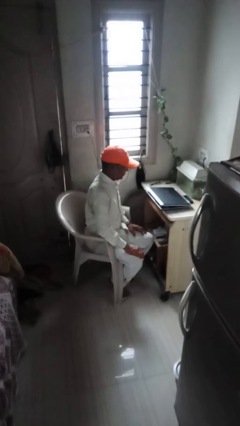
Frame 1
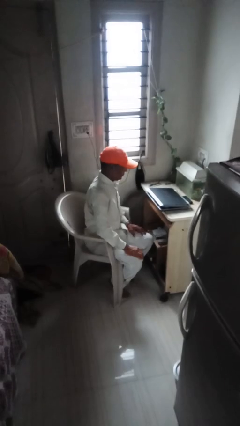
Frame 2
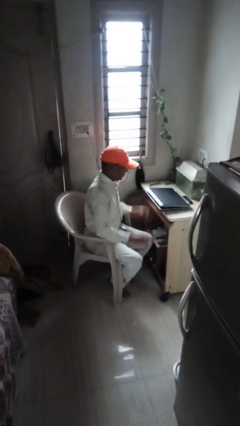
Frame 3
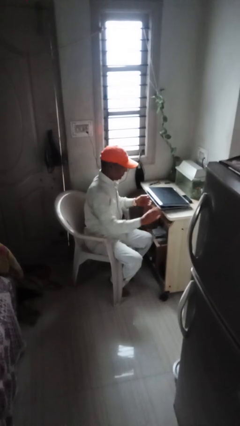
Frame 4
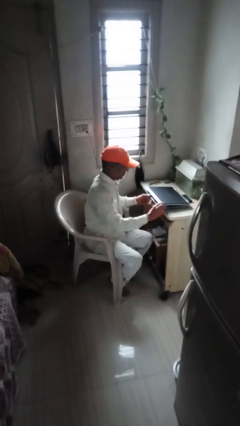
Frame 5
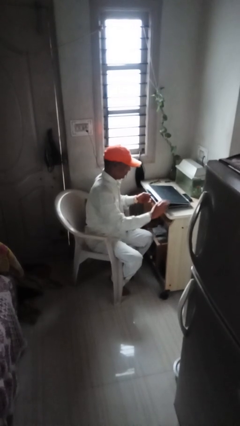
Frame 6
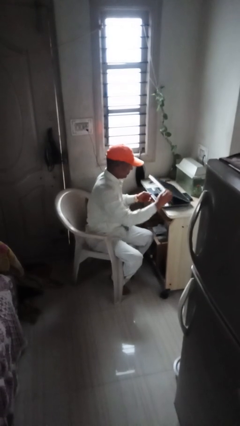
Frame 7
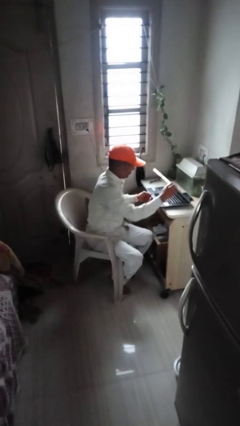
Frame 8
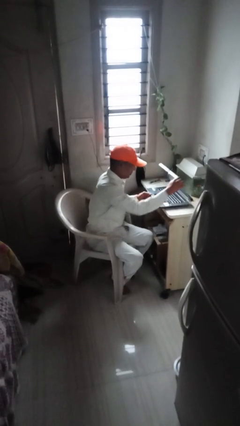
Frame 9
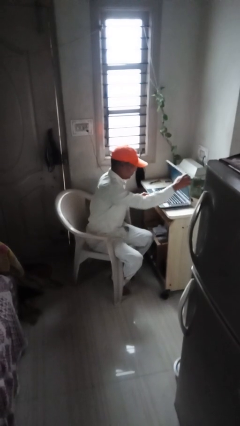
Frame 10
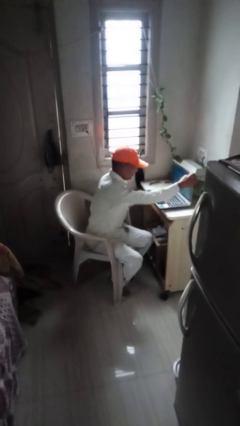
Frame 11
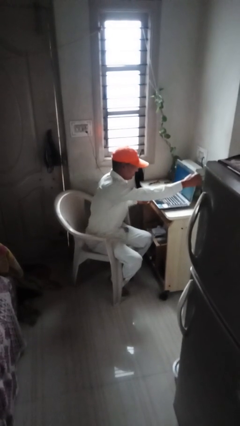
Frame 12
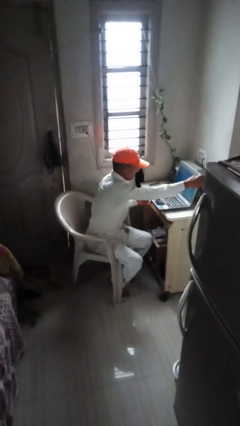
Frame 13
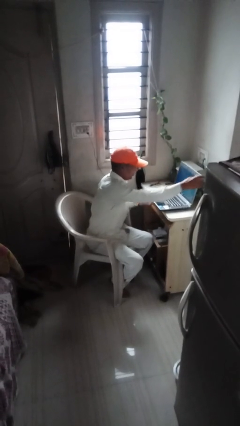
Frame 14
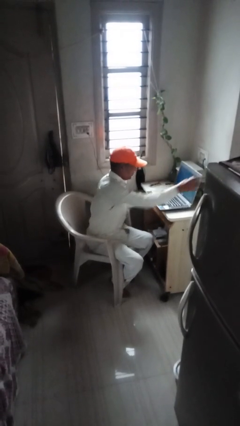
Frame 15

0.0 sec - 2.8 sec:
person opens laptop

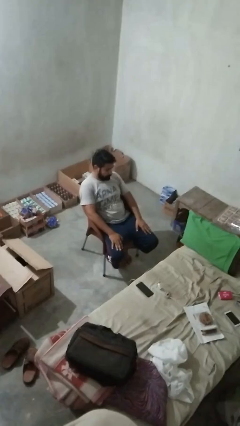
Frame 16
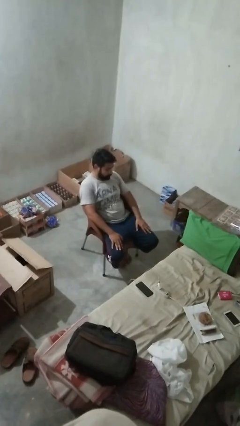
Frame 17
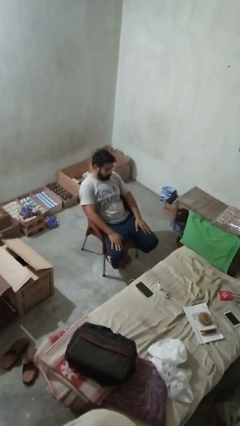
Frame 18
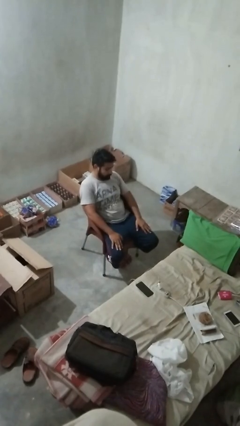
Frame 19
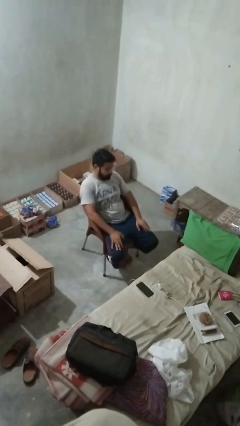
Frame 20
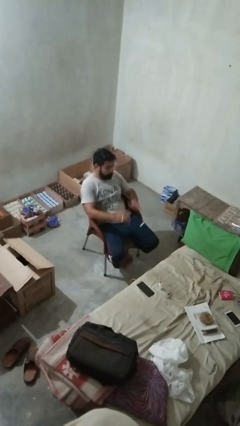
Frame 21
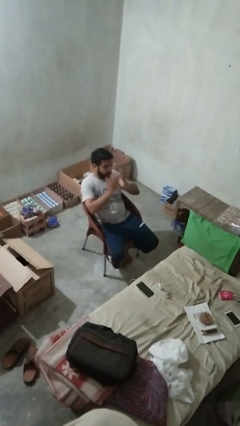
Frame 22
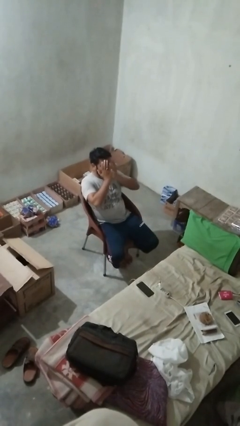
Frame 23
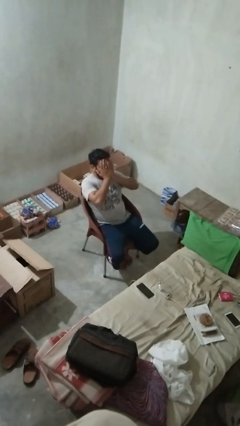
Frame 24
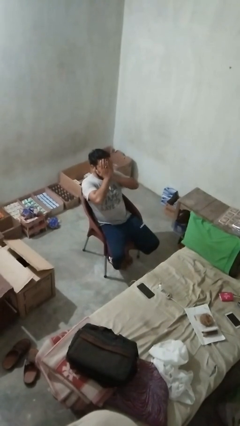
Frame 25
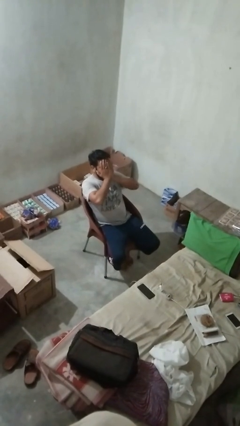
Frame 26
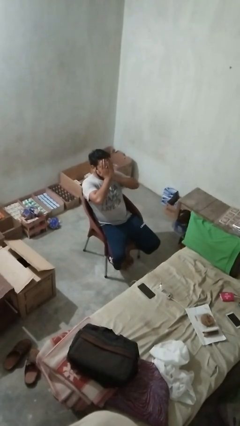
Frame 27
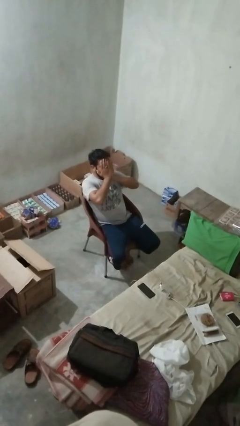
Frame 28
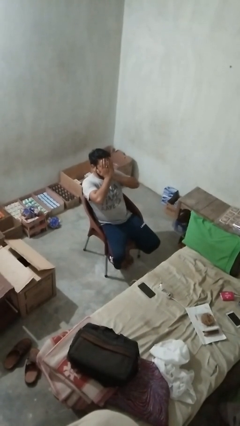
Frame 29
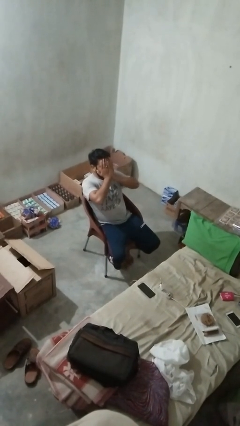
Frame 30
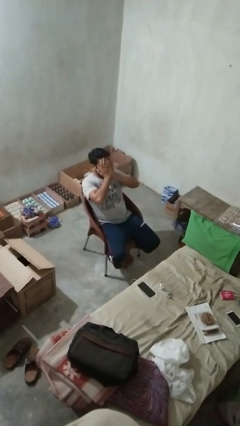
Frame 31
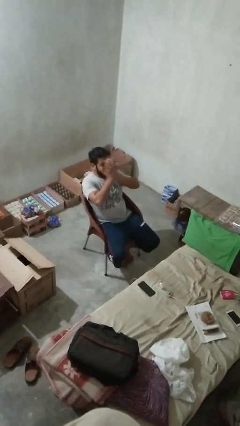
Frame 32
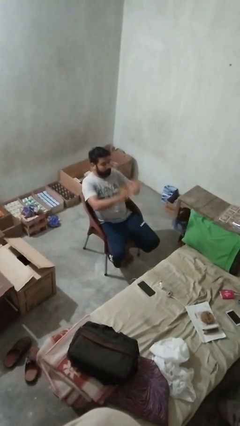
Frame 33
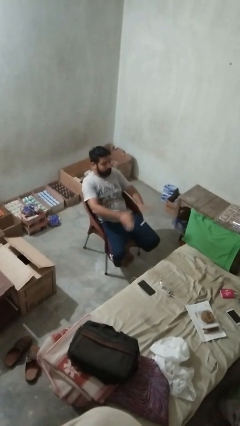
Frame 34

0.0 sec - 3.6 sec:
person covers face with hands

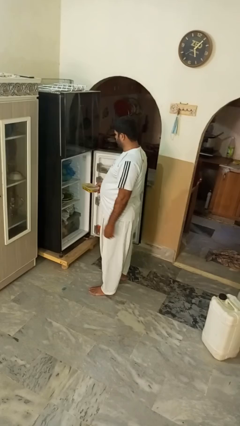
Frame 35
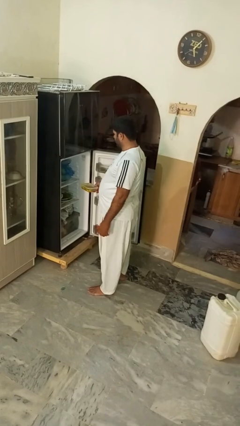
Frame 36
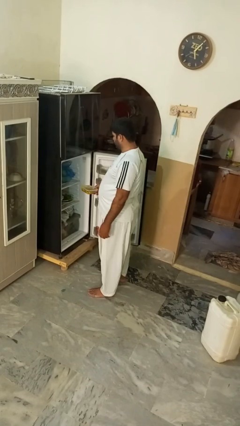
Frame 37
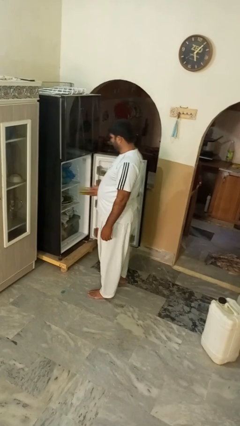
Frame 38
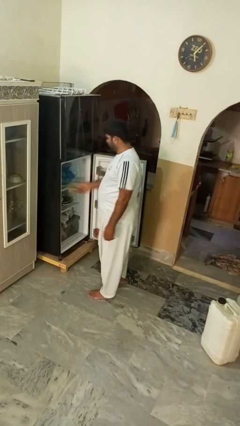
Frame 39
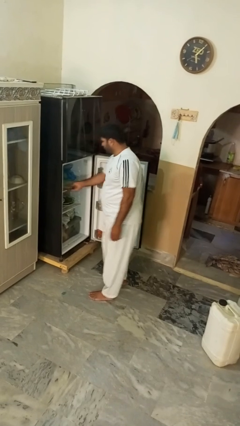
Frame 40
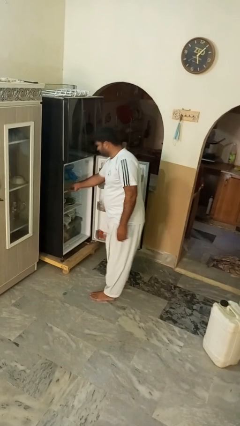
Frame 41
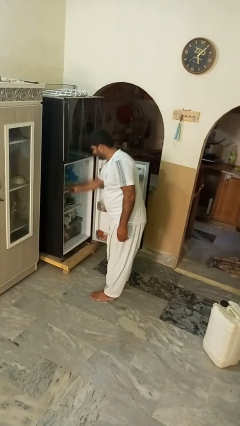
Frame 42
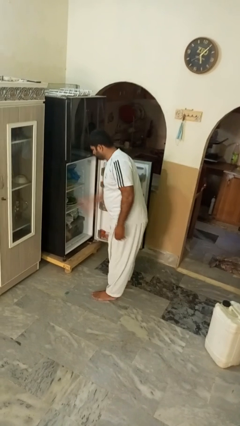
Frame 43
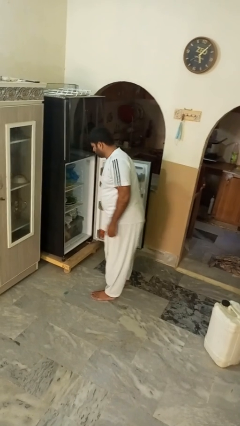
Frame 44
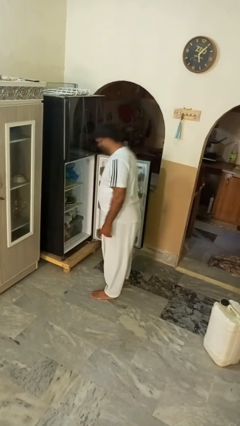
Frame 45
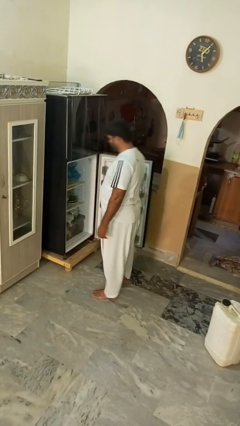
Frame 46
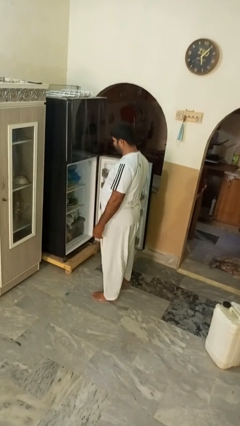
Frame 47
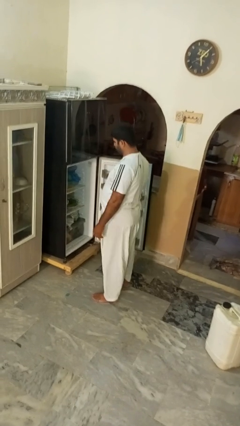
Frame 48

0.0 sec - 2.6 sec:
person puts object into refrigerator

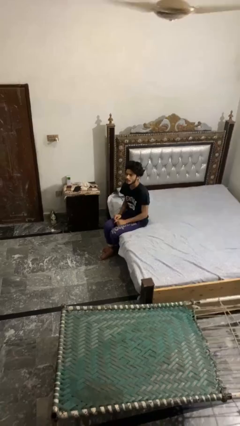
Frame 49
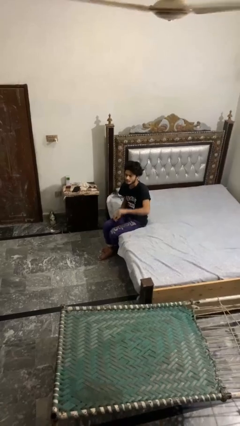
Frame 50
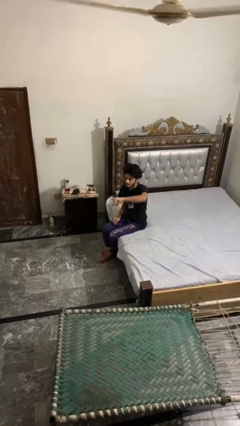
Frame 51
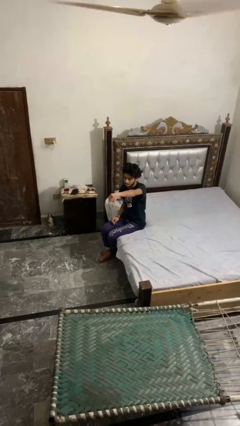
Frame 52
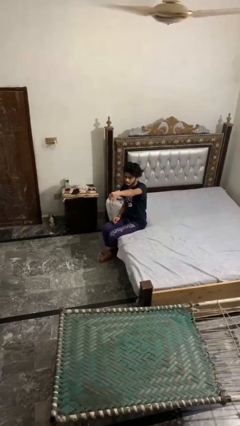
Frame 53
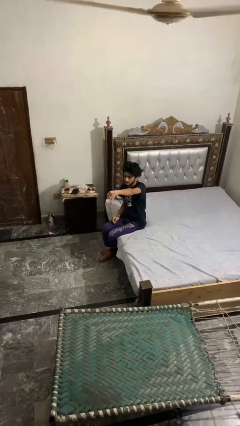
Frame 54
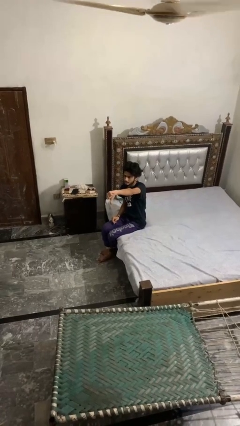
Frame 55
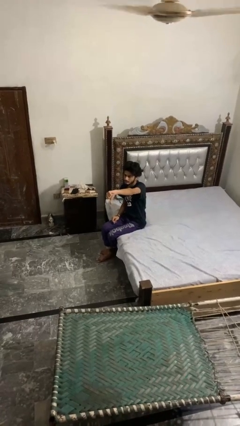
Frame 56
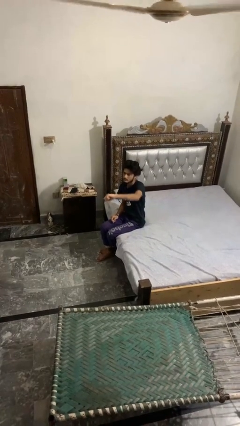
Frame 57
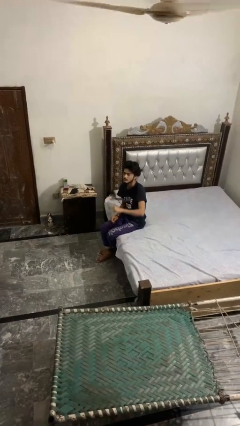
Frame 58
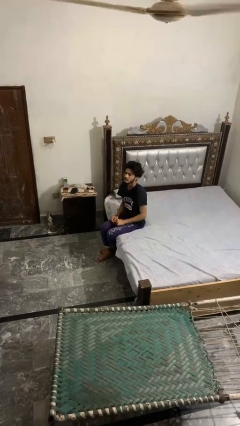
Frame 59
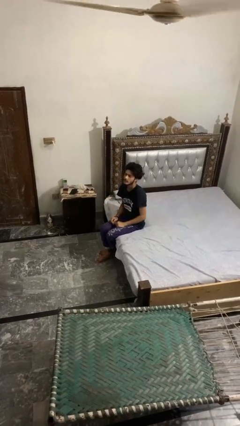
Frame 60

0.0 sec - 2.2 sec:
person gestures thumbs down

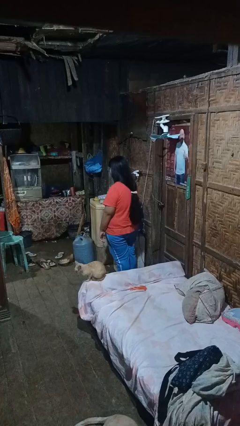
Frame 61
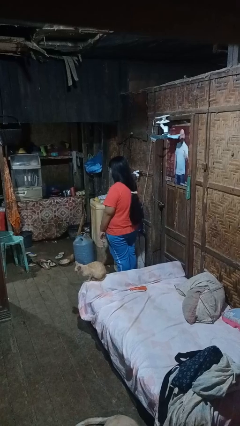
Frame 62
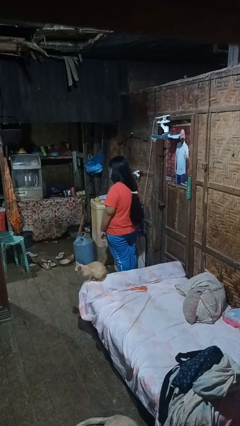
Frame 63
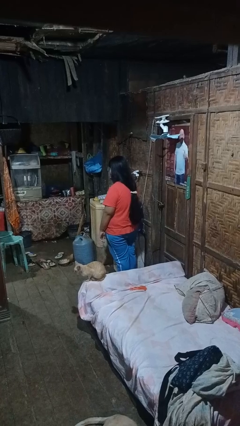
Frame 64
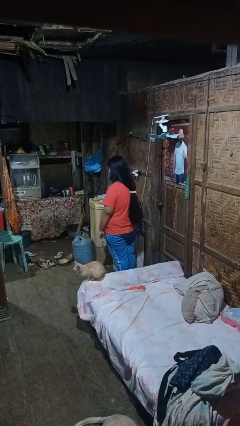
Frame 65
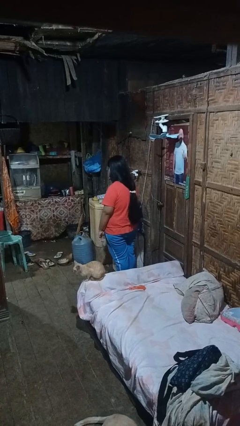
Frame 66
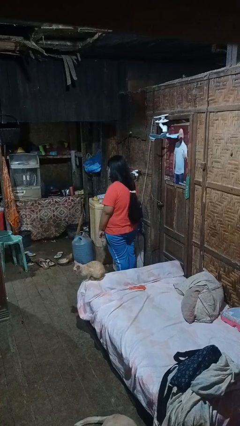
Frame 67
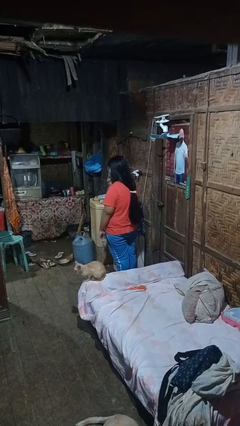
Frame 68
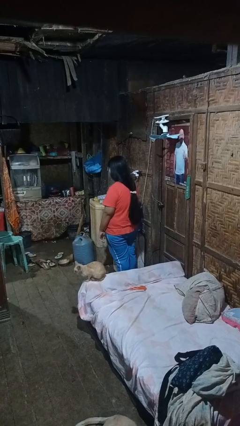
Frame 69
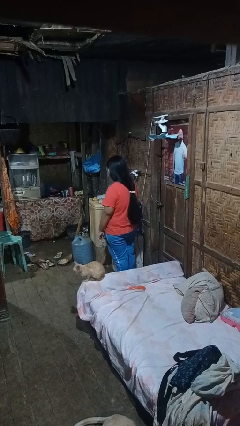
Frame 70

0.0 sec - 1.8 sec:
person licks fingers

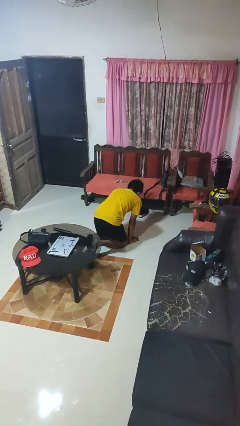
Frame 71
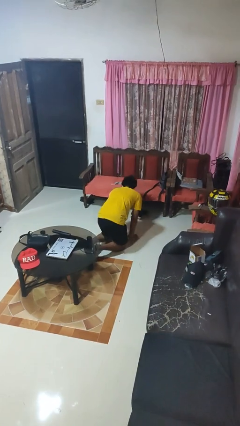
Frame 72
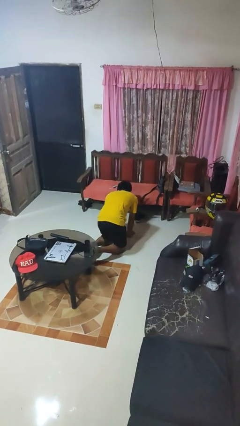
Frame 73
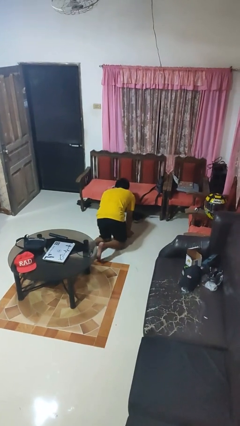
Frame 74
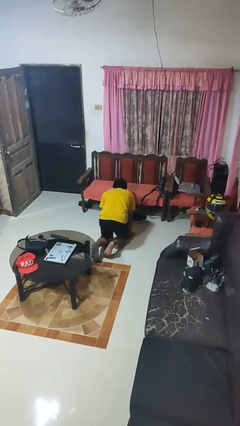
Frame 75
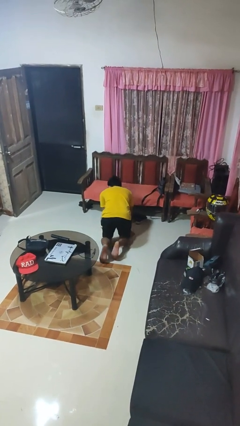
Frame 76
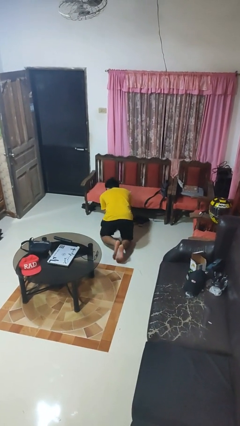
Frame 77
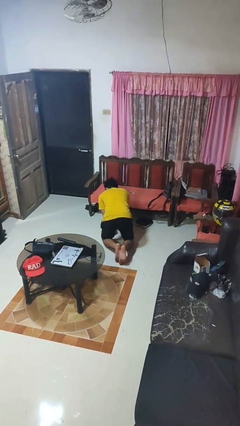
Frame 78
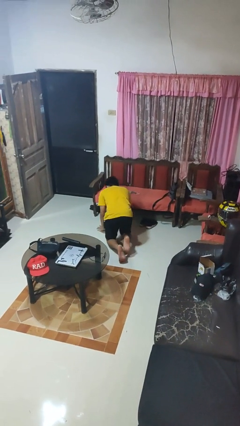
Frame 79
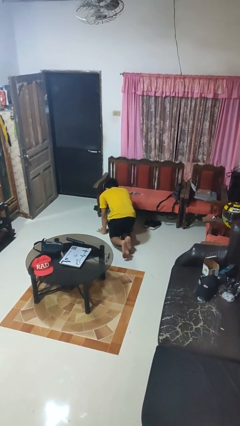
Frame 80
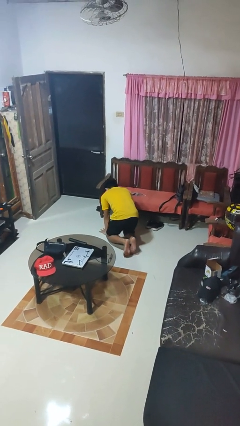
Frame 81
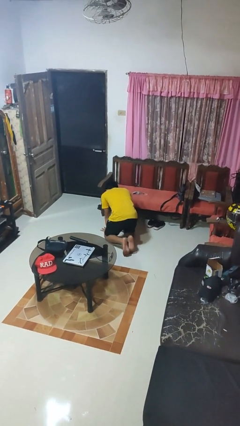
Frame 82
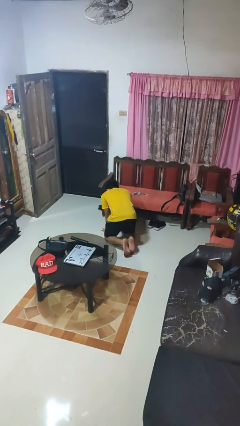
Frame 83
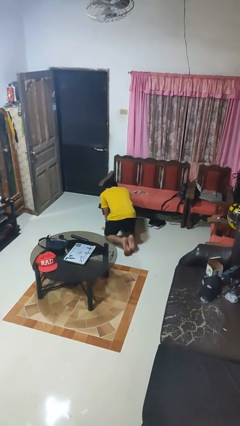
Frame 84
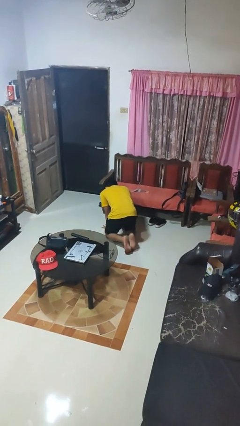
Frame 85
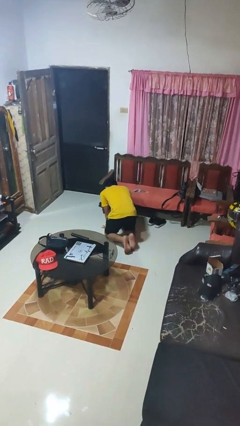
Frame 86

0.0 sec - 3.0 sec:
person crawls

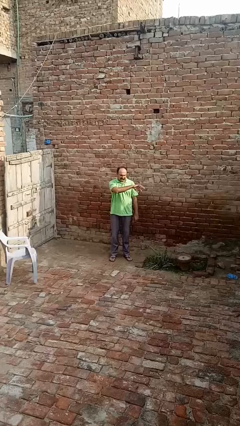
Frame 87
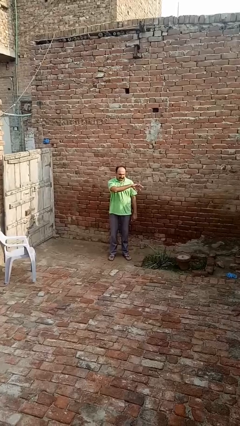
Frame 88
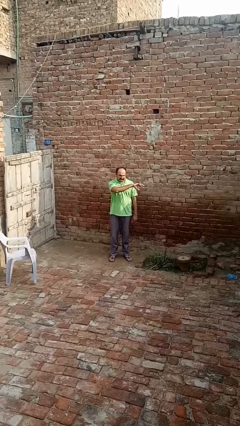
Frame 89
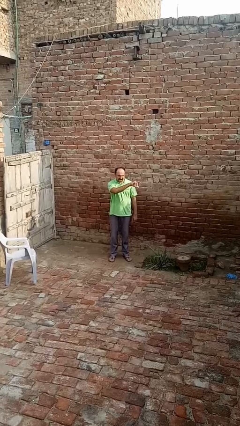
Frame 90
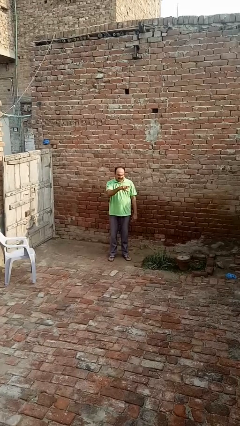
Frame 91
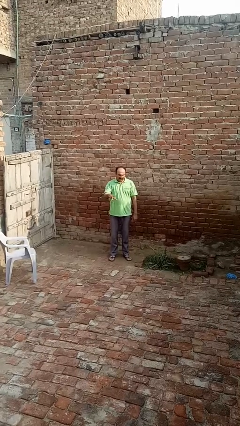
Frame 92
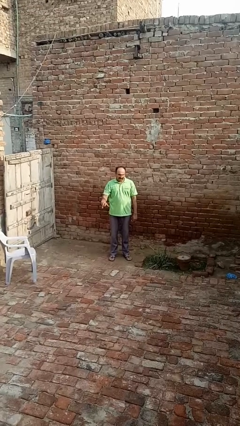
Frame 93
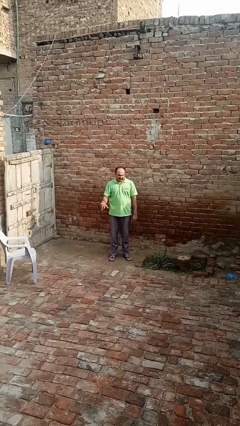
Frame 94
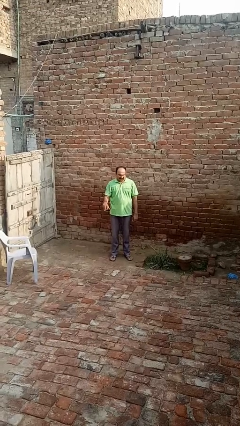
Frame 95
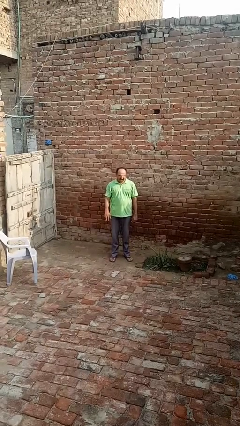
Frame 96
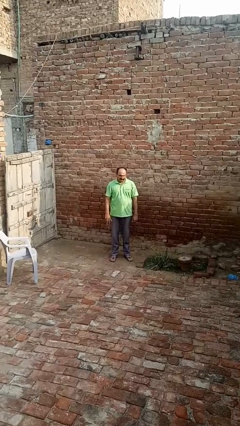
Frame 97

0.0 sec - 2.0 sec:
person gestures swipe right
